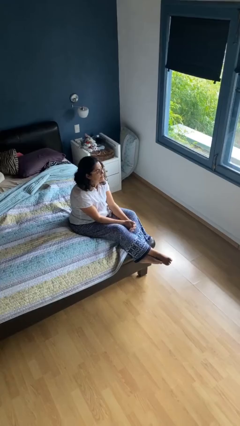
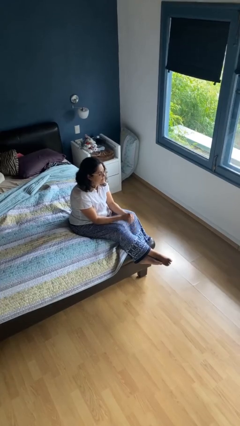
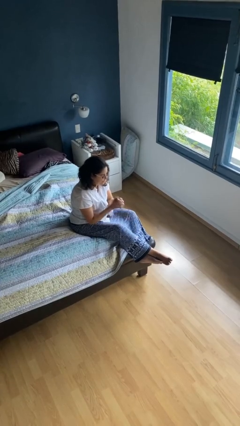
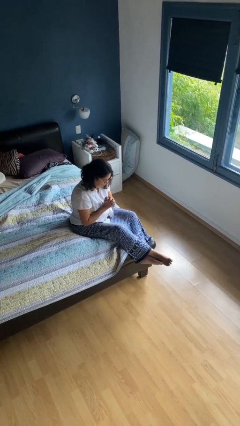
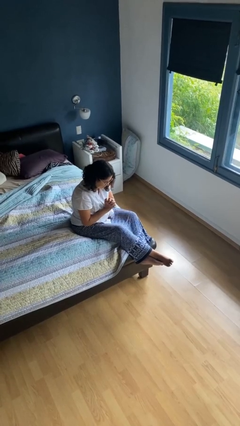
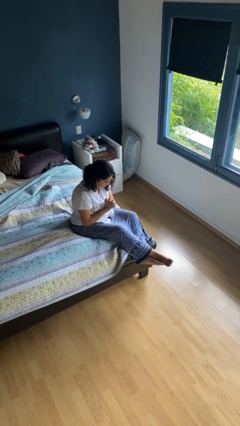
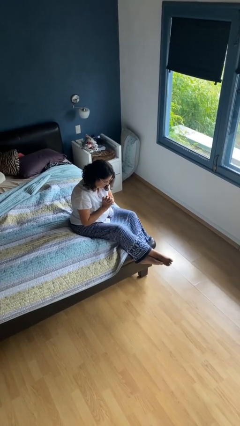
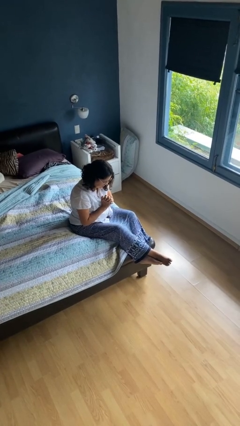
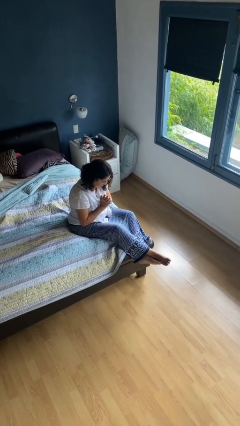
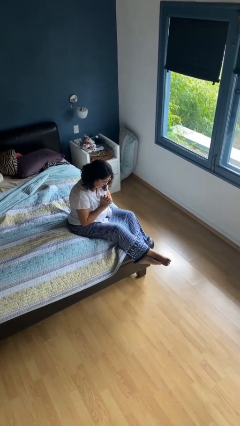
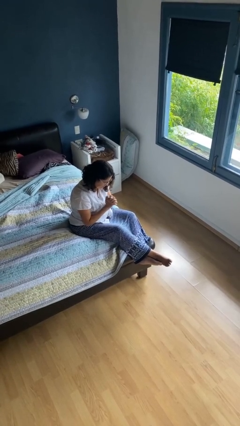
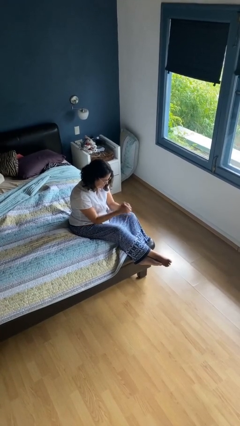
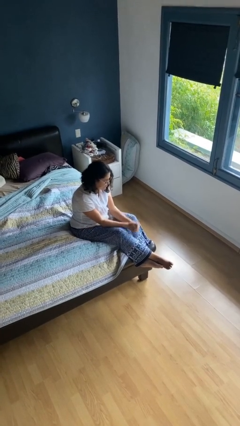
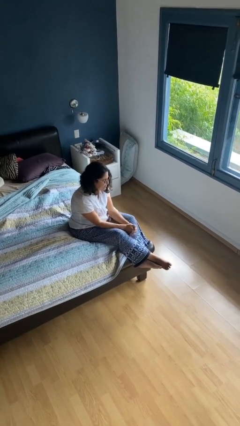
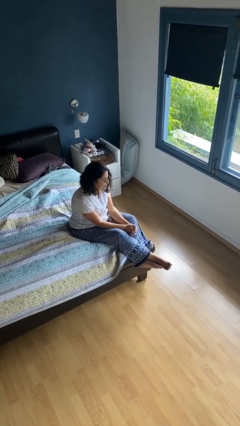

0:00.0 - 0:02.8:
person prays

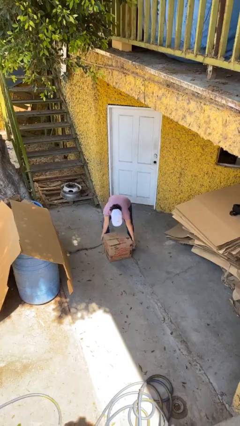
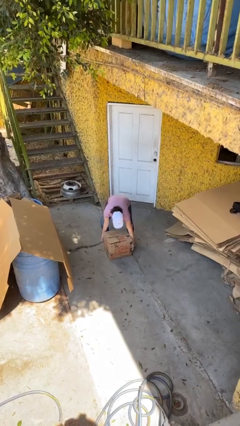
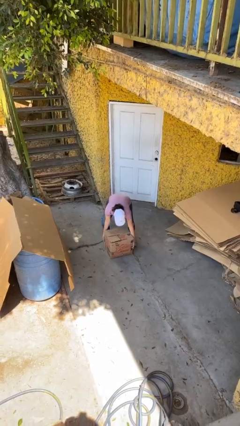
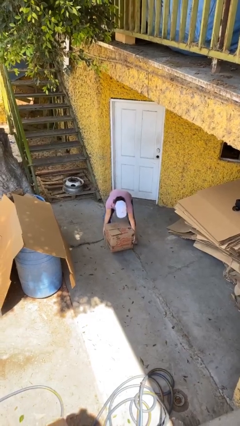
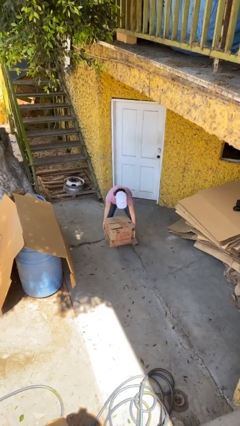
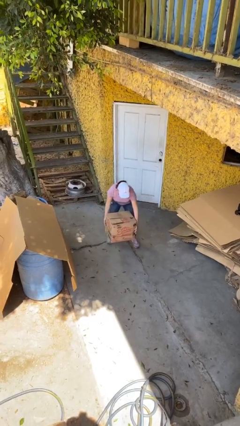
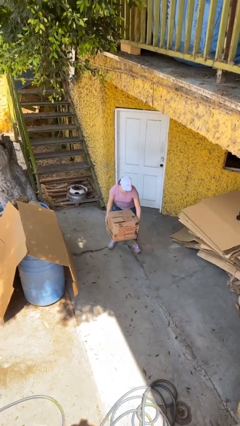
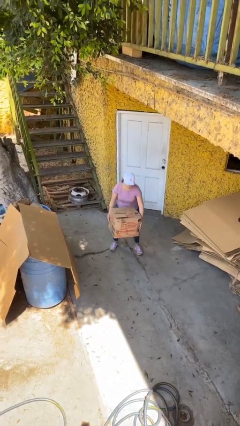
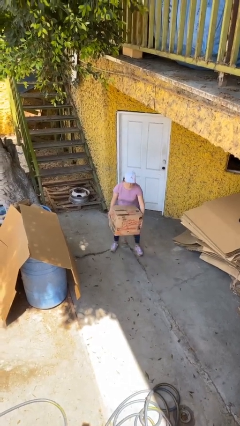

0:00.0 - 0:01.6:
person picks up object from floor

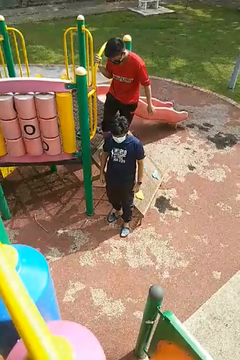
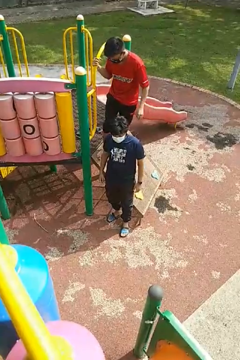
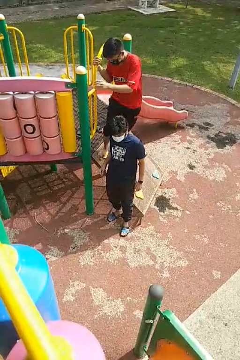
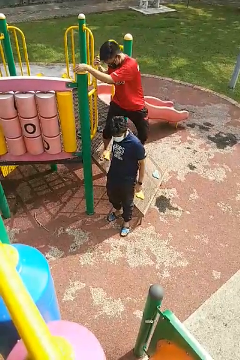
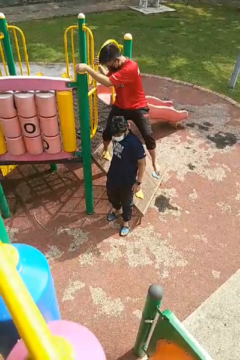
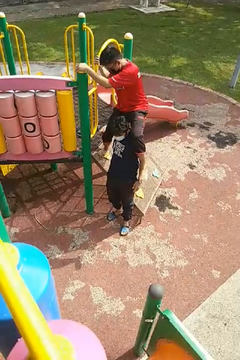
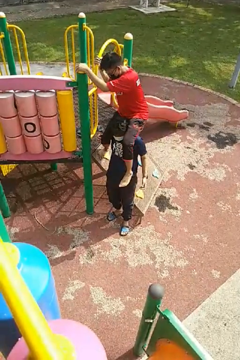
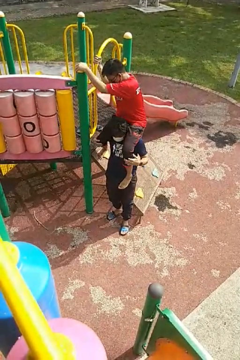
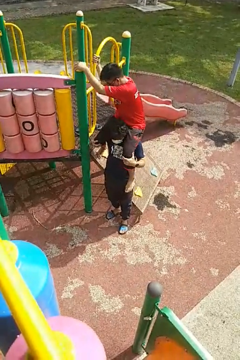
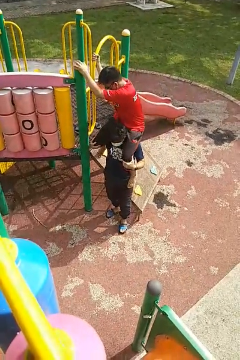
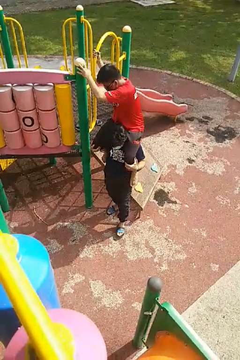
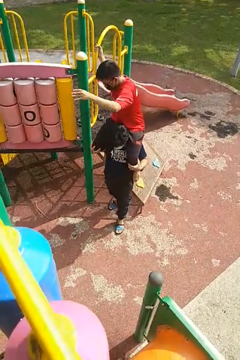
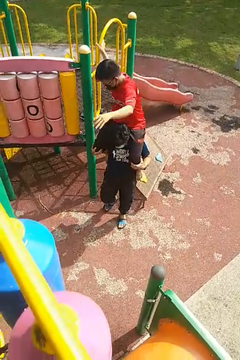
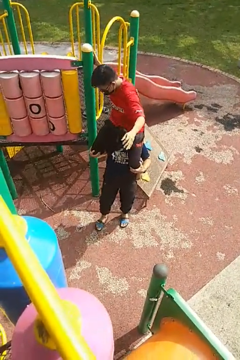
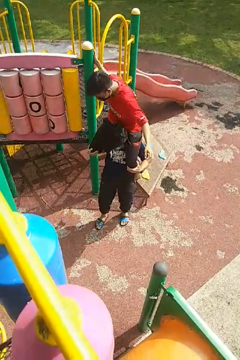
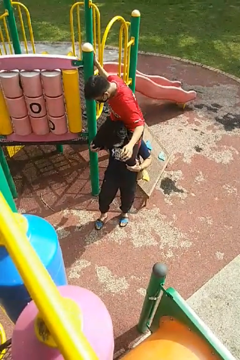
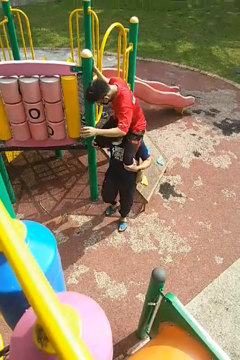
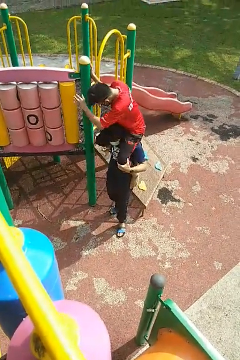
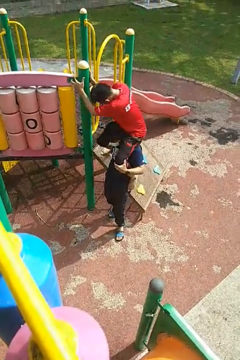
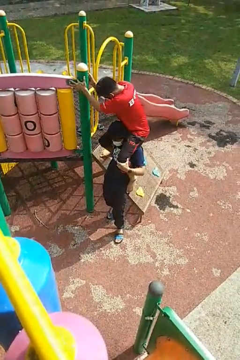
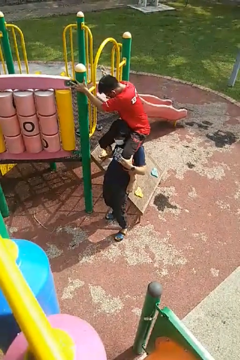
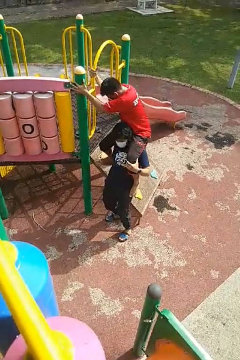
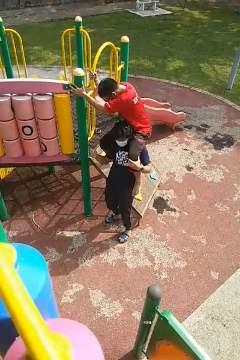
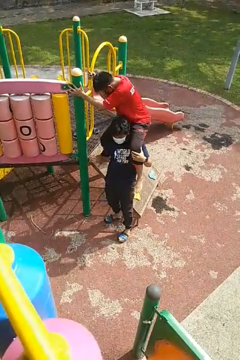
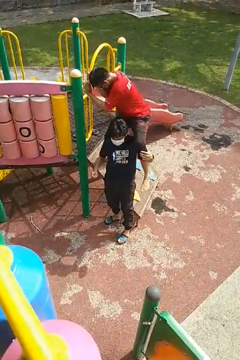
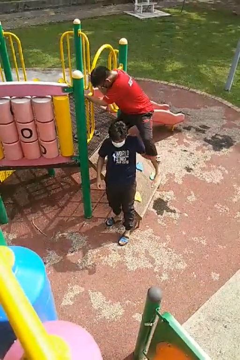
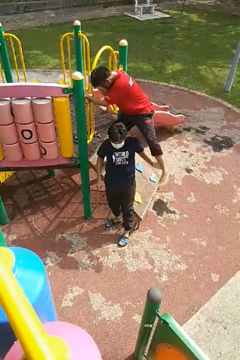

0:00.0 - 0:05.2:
person carries person on shoulders

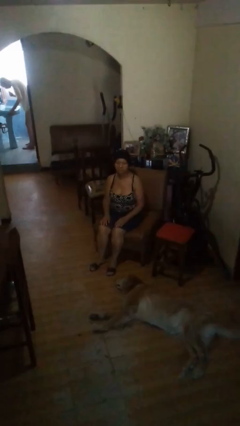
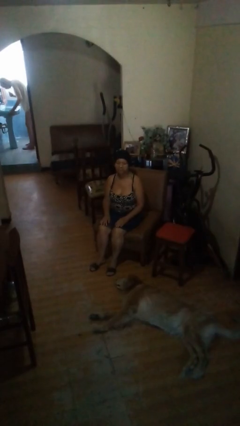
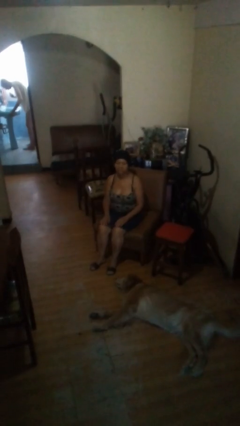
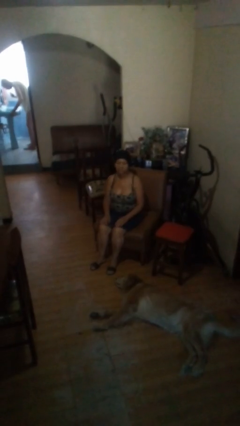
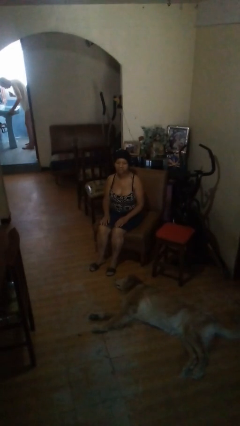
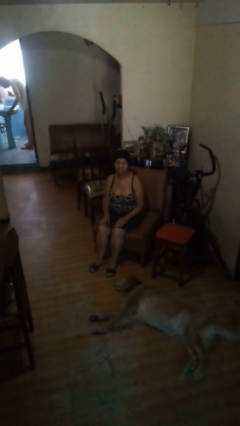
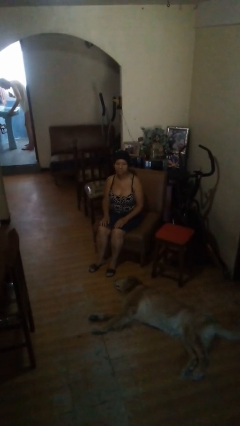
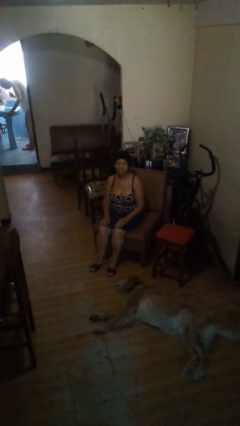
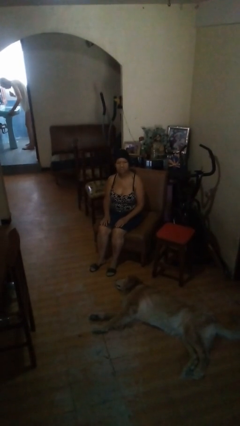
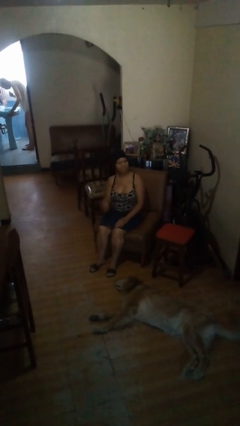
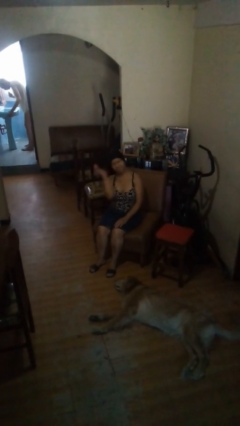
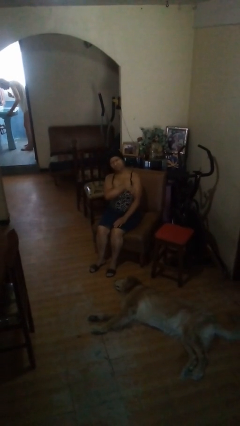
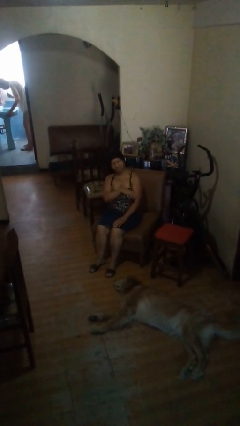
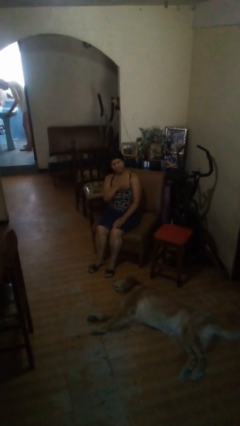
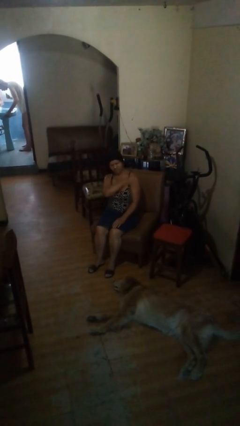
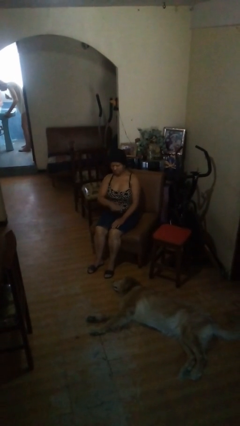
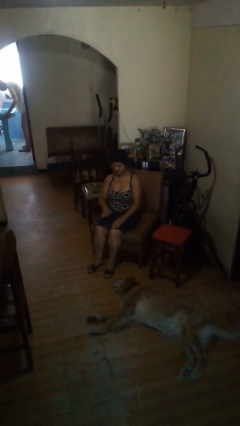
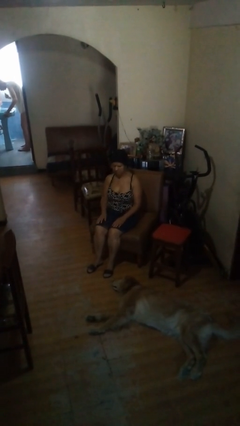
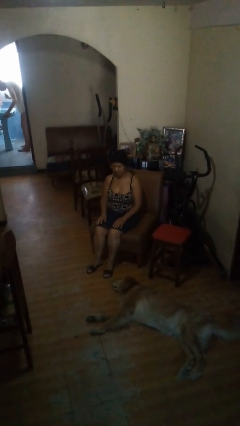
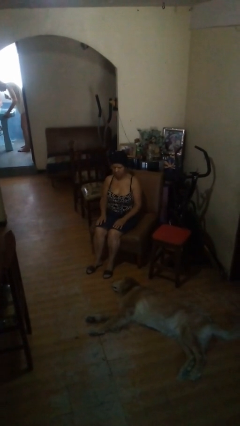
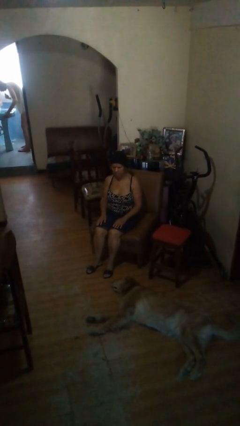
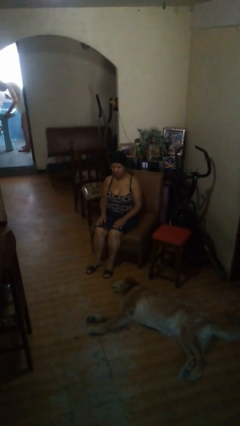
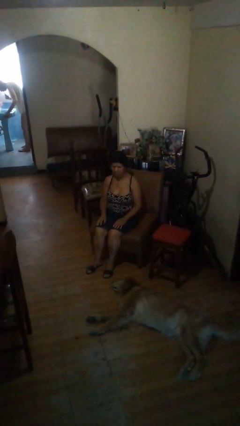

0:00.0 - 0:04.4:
person swats bug

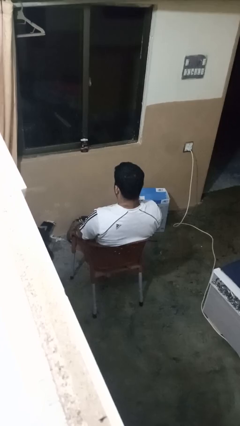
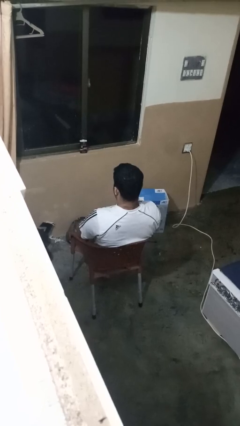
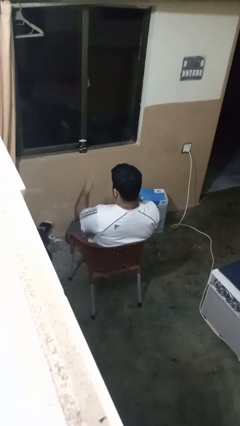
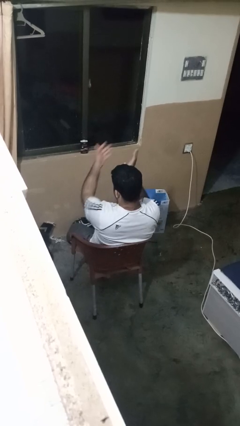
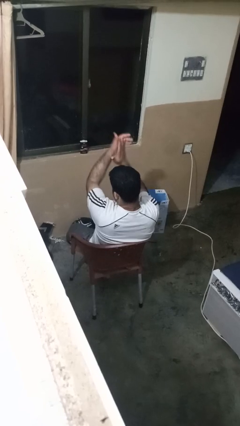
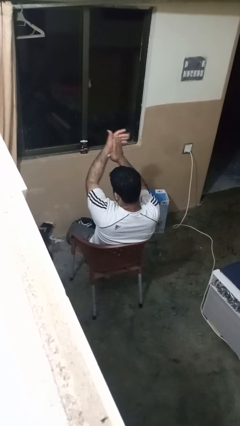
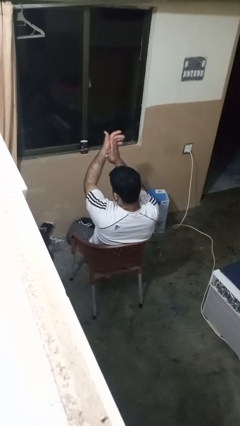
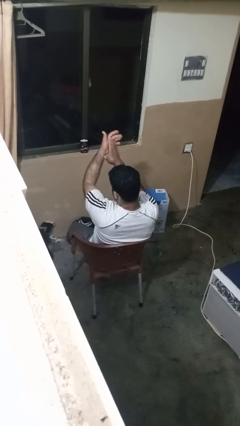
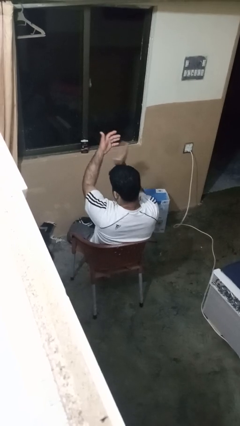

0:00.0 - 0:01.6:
person claps hands

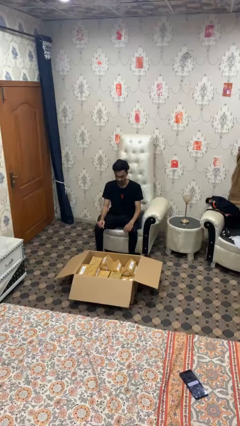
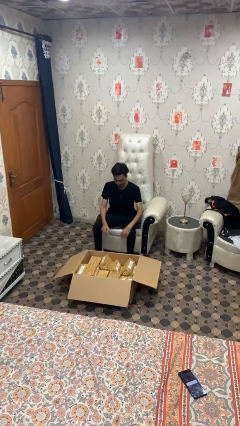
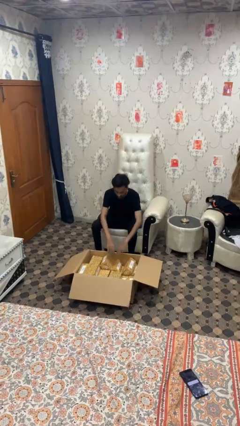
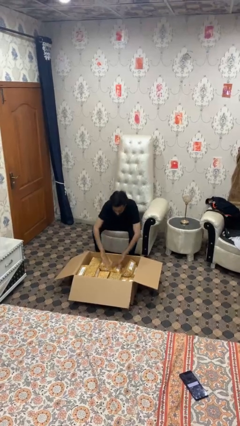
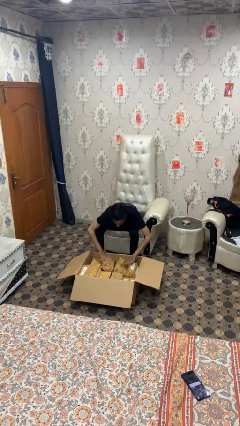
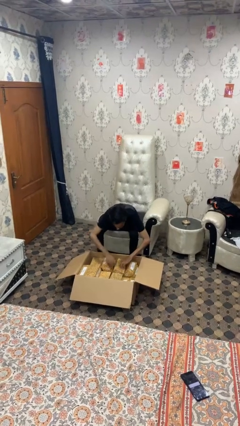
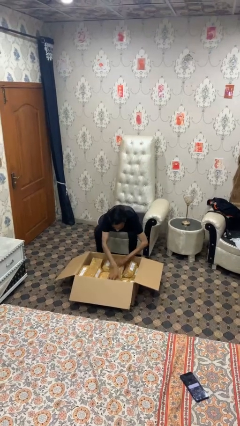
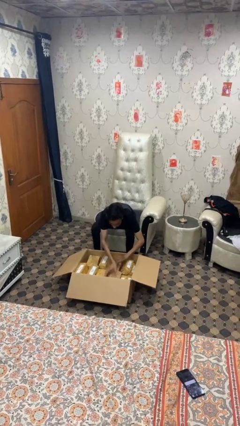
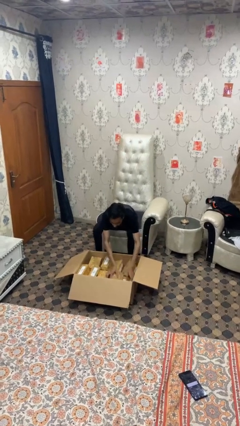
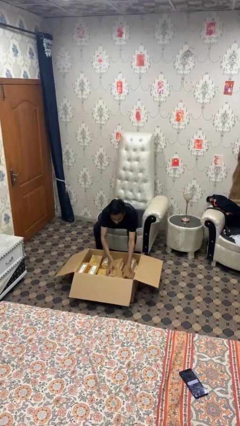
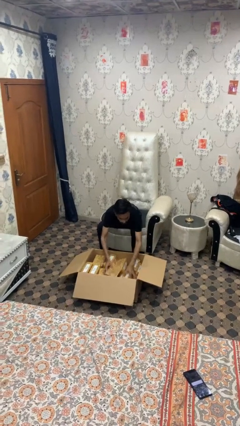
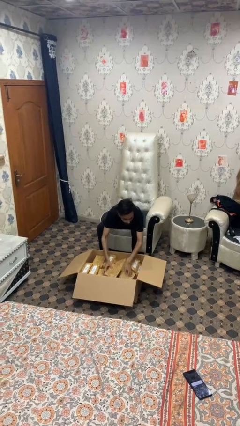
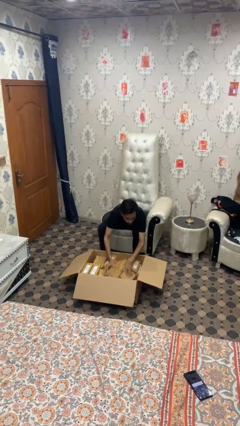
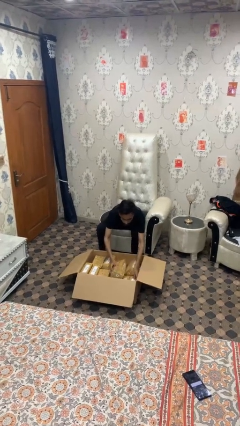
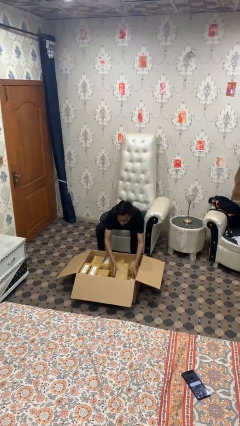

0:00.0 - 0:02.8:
person searches in box
